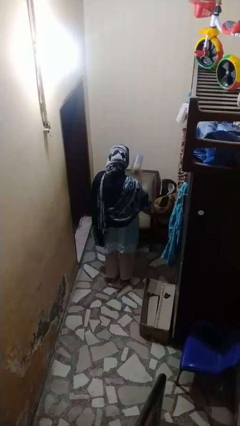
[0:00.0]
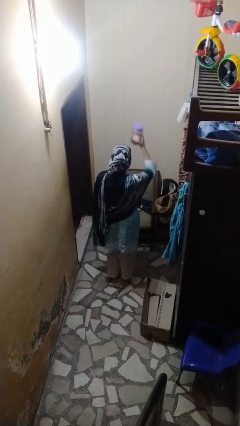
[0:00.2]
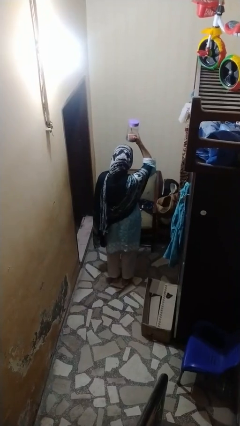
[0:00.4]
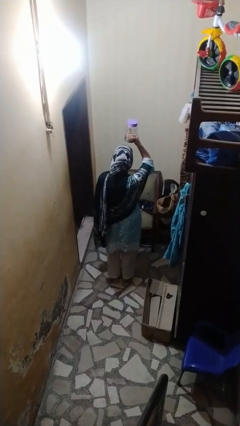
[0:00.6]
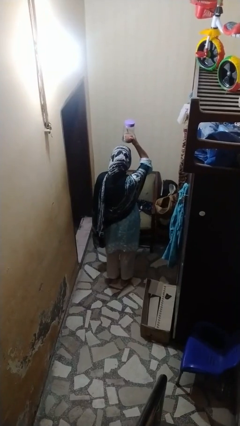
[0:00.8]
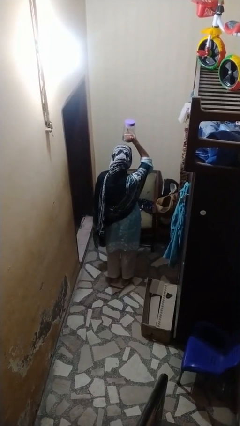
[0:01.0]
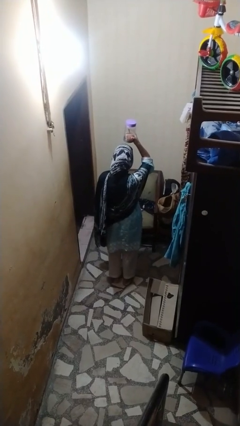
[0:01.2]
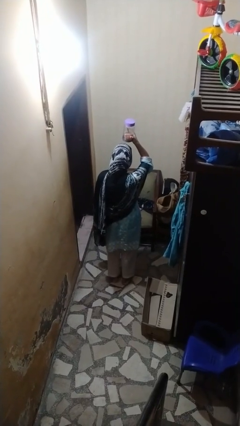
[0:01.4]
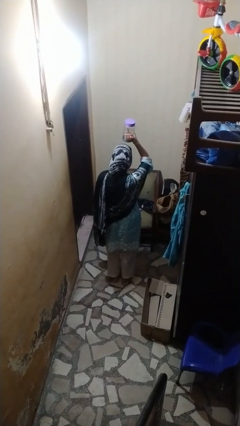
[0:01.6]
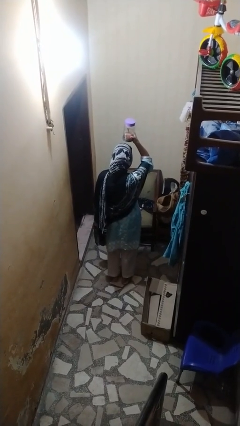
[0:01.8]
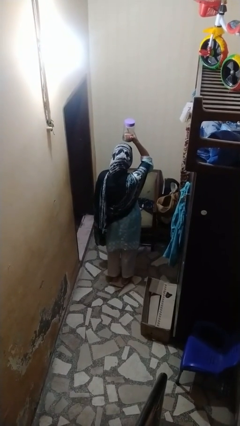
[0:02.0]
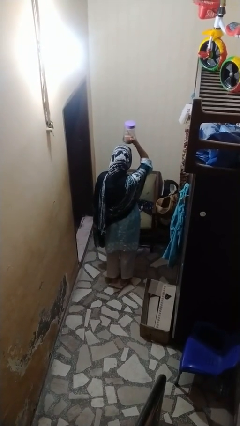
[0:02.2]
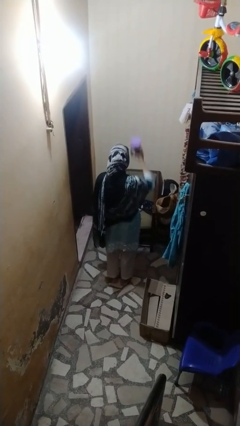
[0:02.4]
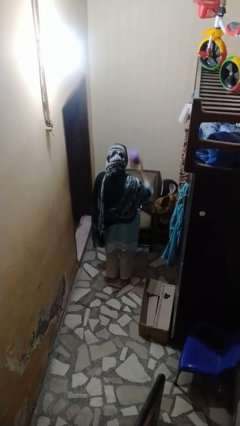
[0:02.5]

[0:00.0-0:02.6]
person holds object above head

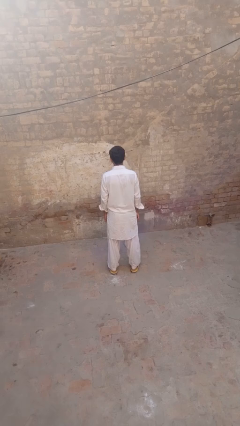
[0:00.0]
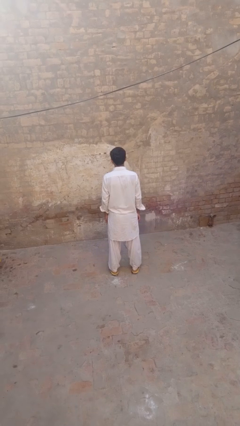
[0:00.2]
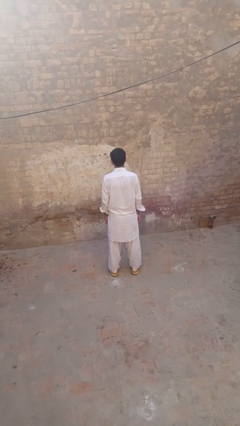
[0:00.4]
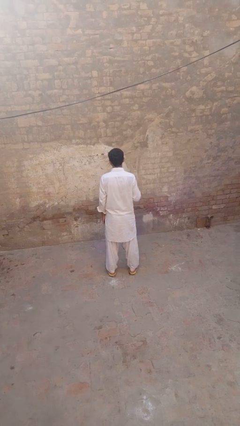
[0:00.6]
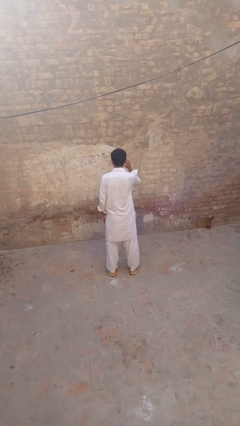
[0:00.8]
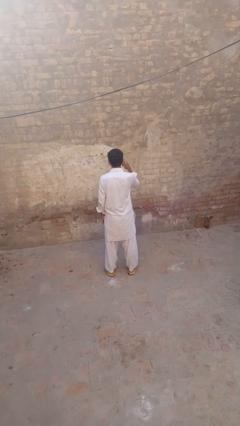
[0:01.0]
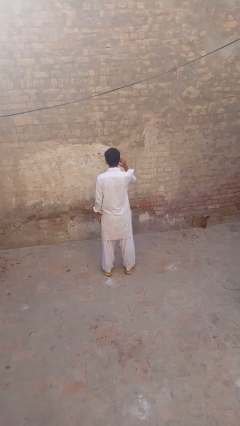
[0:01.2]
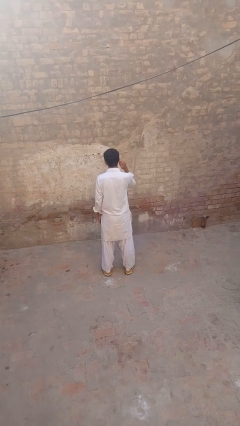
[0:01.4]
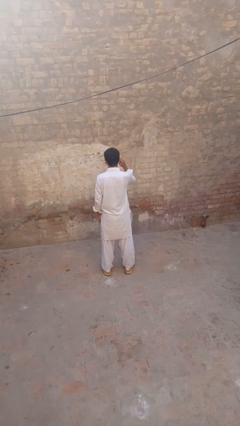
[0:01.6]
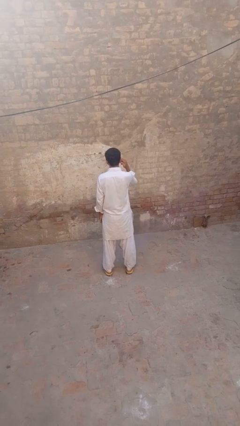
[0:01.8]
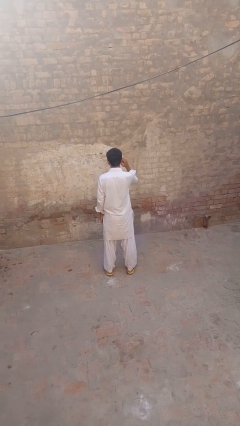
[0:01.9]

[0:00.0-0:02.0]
person touches earlobe

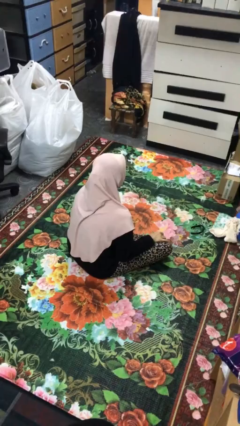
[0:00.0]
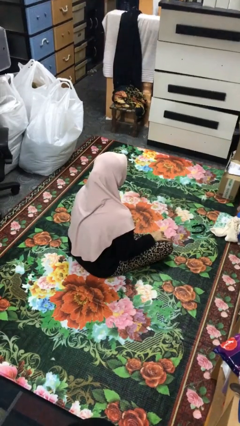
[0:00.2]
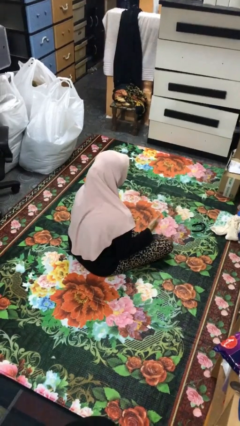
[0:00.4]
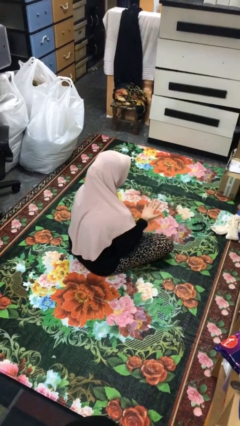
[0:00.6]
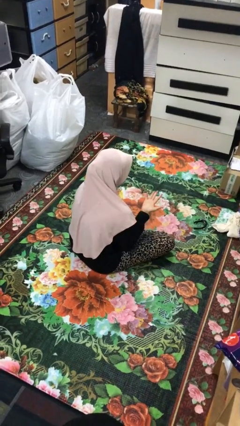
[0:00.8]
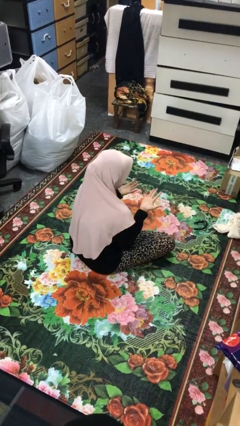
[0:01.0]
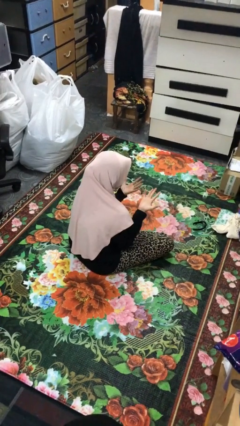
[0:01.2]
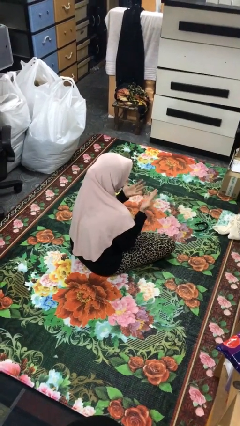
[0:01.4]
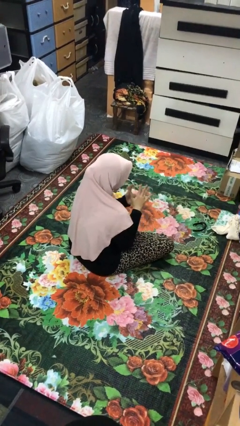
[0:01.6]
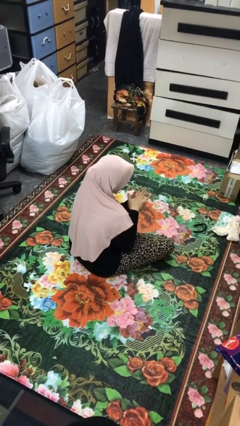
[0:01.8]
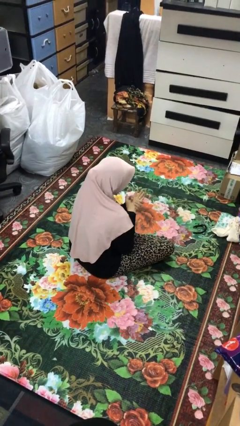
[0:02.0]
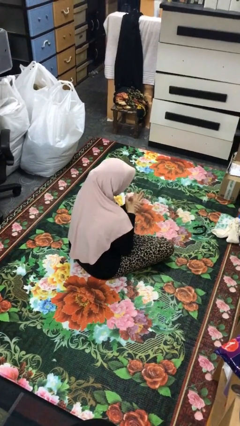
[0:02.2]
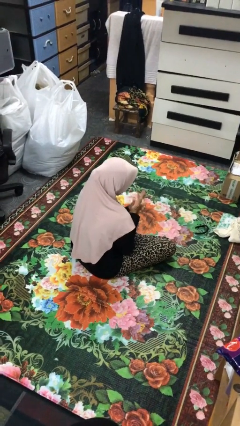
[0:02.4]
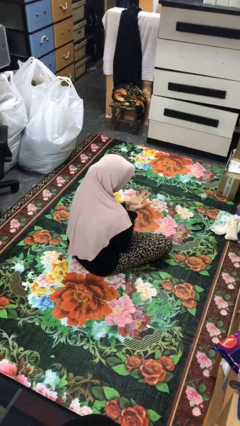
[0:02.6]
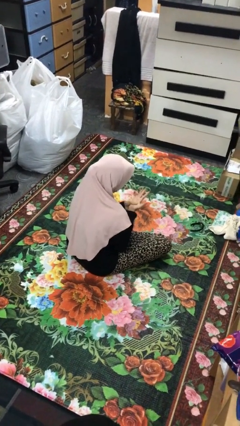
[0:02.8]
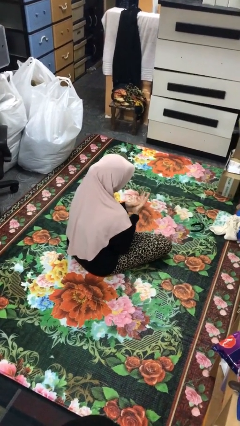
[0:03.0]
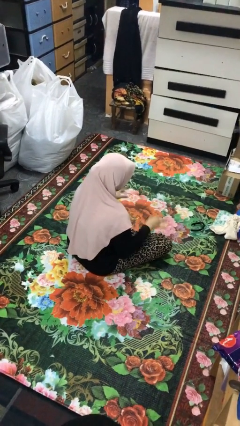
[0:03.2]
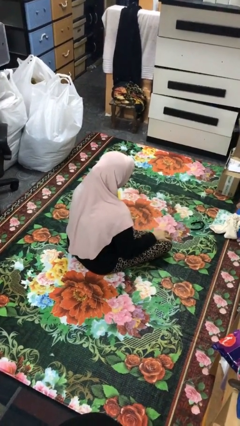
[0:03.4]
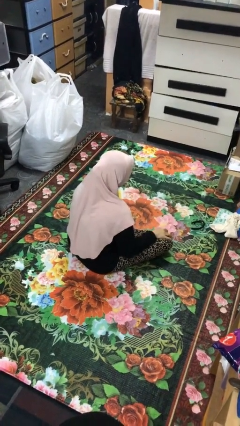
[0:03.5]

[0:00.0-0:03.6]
person looks at hands in lap

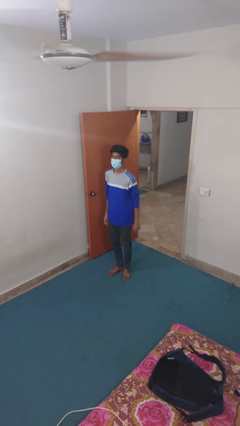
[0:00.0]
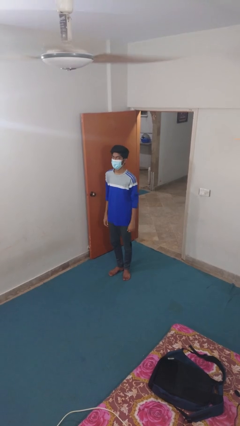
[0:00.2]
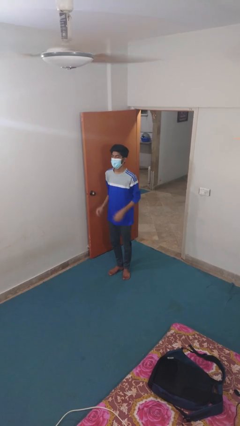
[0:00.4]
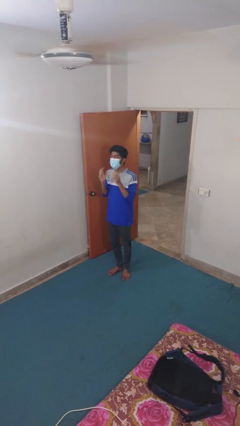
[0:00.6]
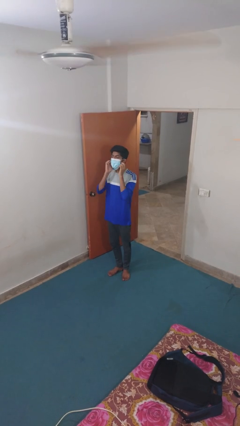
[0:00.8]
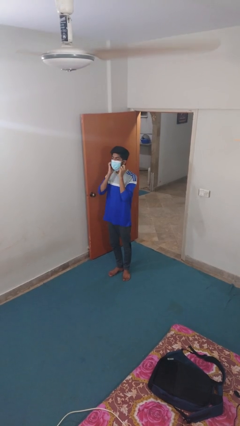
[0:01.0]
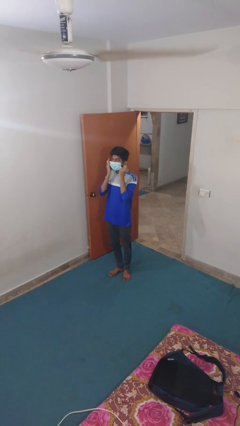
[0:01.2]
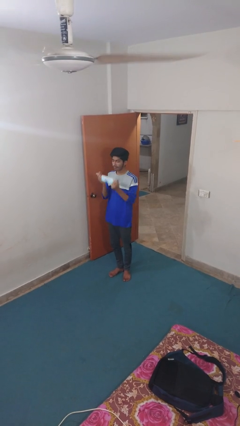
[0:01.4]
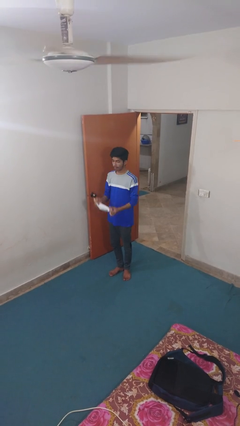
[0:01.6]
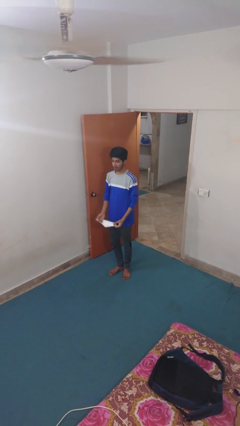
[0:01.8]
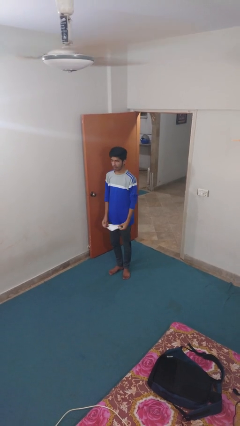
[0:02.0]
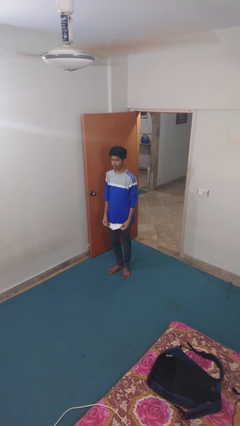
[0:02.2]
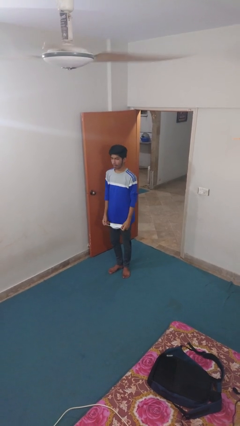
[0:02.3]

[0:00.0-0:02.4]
person takes off facemask

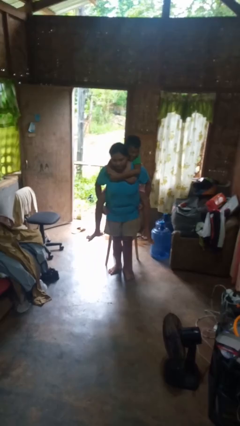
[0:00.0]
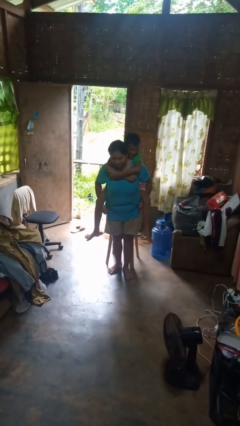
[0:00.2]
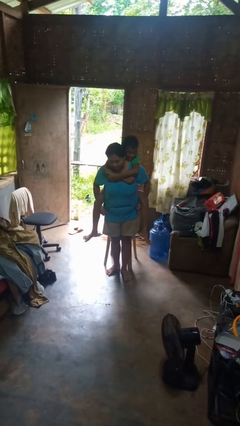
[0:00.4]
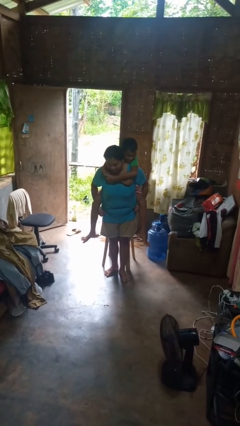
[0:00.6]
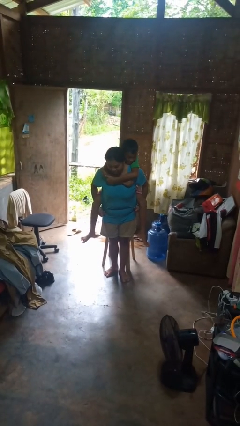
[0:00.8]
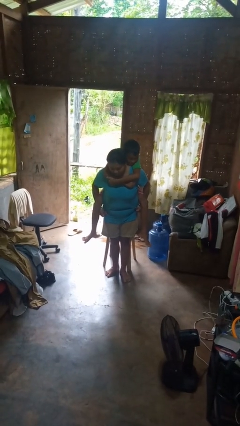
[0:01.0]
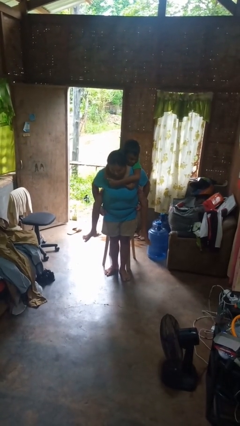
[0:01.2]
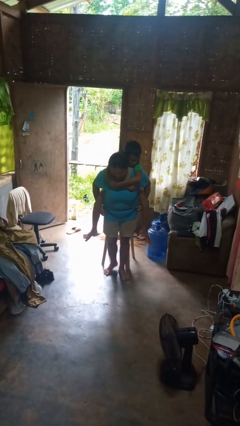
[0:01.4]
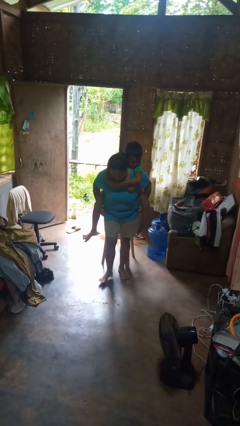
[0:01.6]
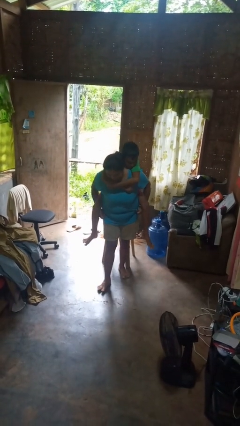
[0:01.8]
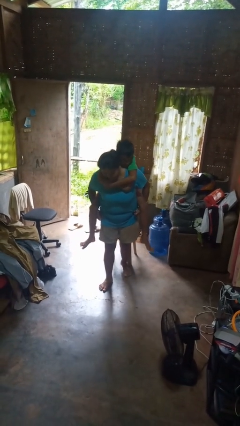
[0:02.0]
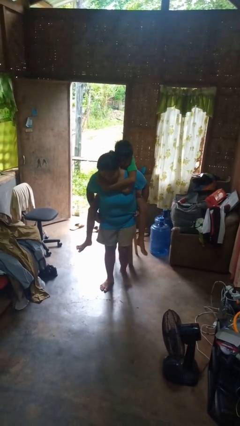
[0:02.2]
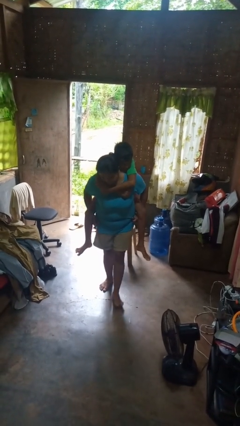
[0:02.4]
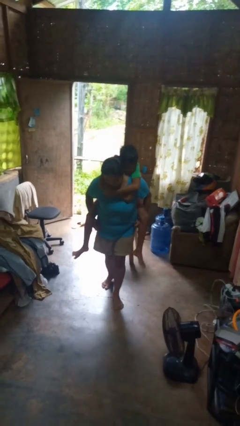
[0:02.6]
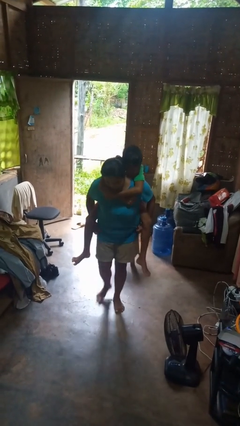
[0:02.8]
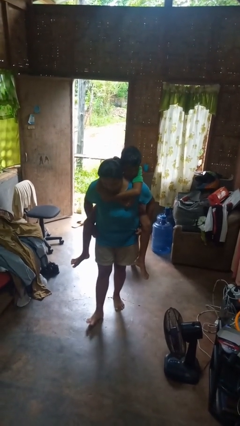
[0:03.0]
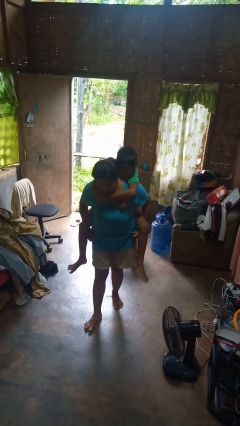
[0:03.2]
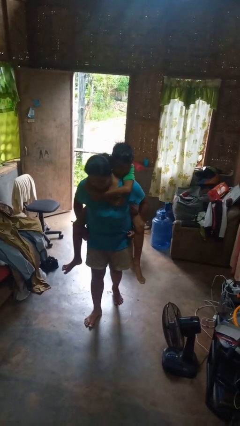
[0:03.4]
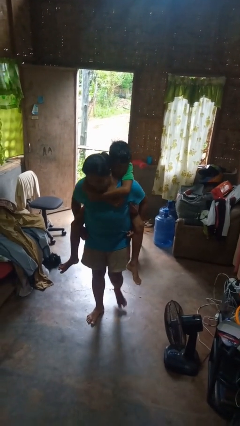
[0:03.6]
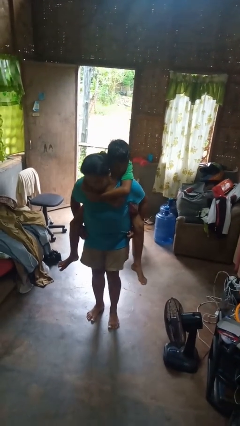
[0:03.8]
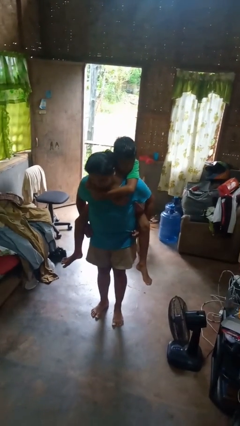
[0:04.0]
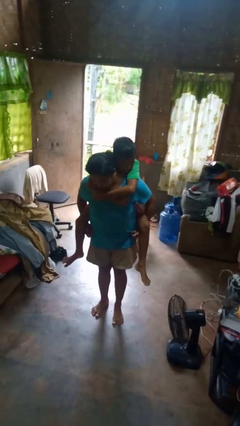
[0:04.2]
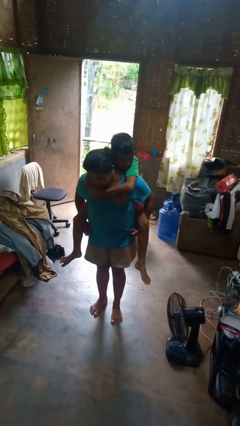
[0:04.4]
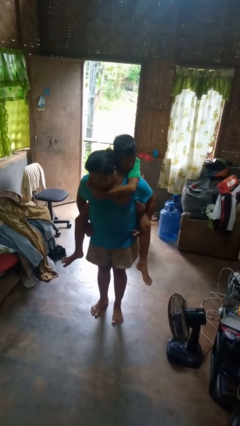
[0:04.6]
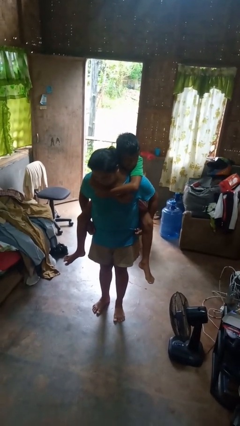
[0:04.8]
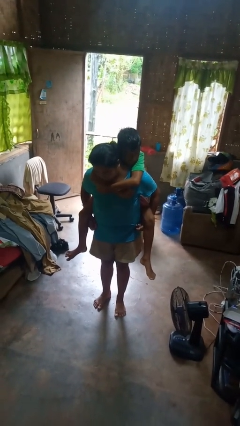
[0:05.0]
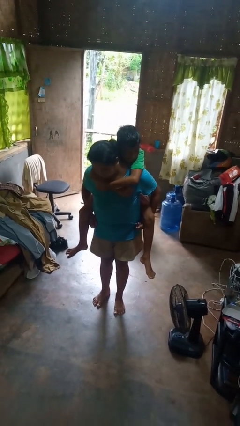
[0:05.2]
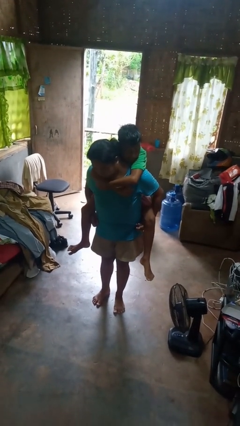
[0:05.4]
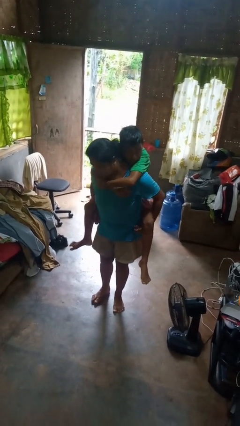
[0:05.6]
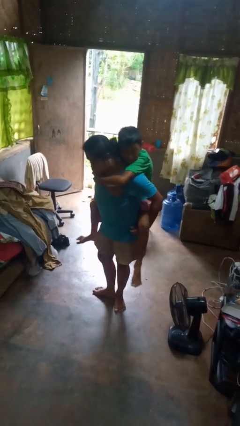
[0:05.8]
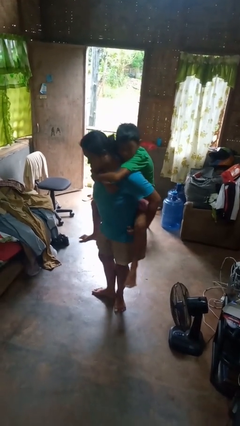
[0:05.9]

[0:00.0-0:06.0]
person carries person on back

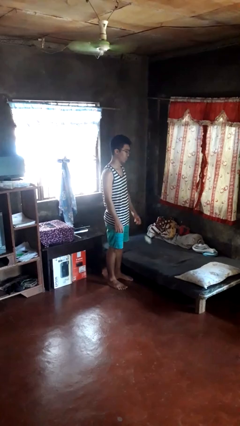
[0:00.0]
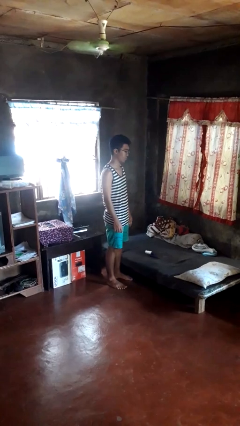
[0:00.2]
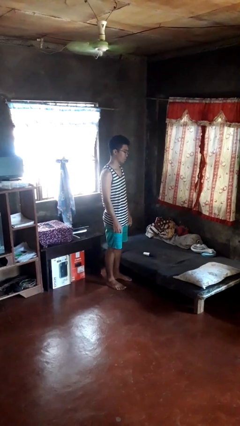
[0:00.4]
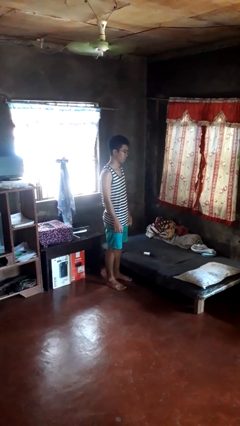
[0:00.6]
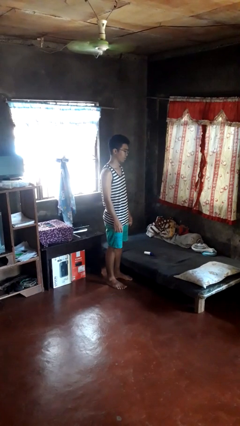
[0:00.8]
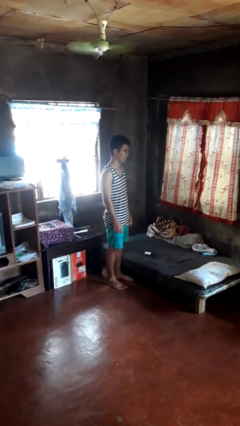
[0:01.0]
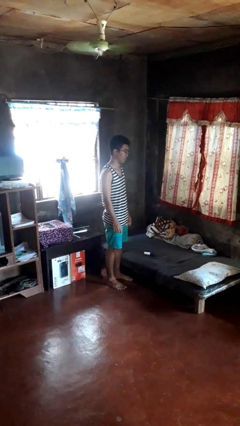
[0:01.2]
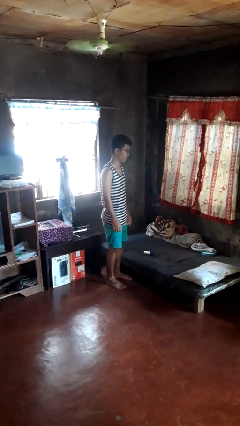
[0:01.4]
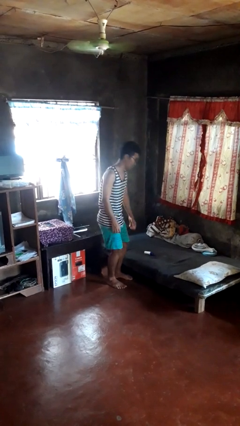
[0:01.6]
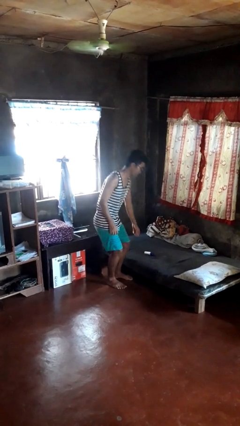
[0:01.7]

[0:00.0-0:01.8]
person throws object on bed
